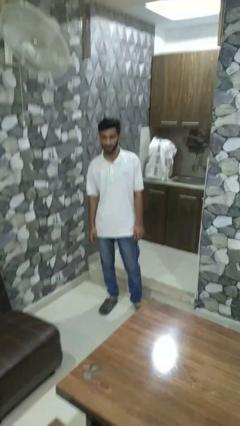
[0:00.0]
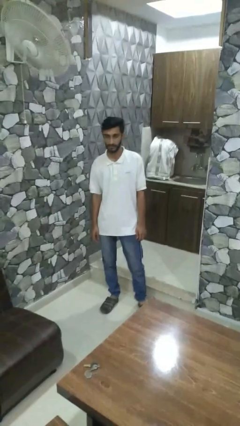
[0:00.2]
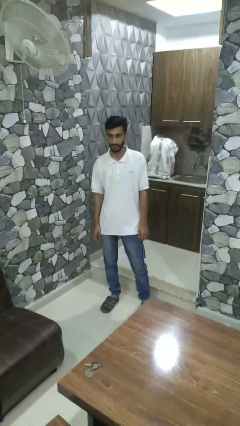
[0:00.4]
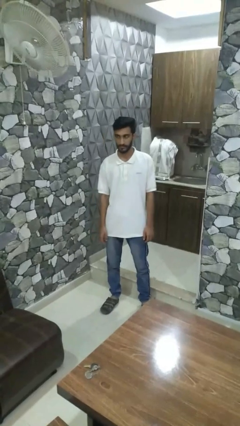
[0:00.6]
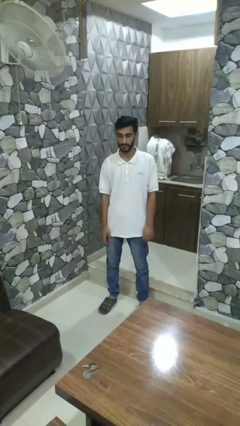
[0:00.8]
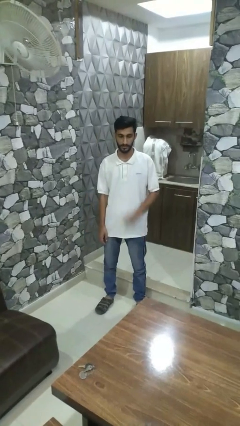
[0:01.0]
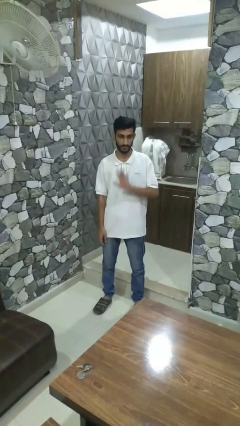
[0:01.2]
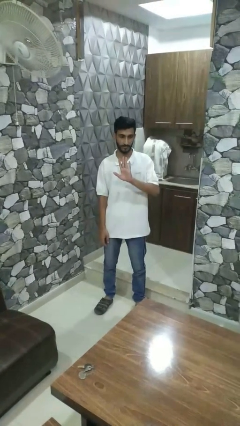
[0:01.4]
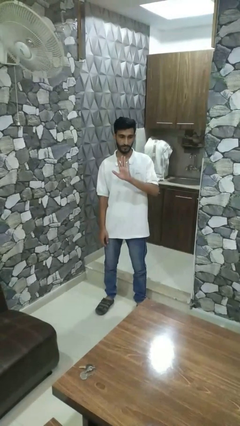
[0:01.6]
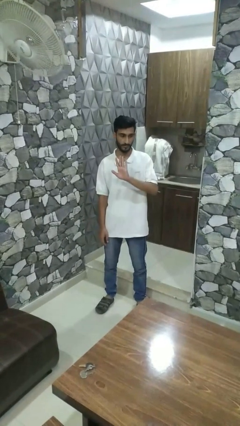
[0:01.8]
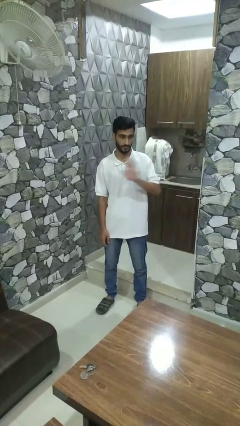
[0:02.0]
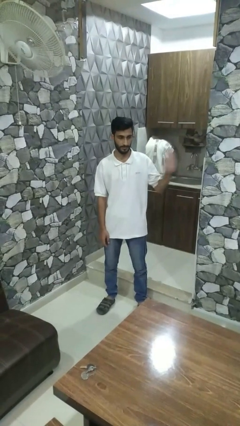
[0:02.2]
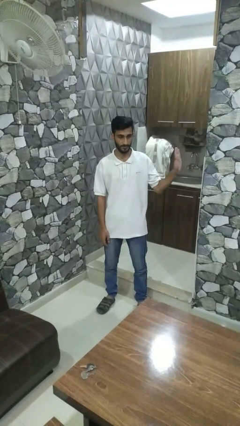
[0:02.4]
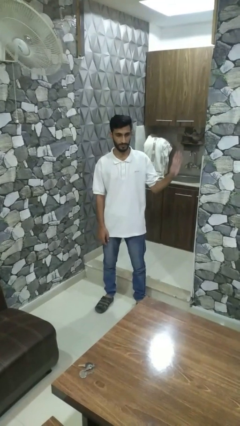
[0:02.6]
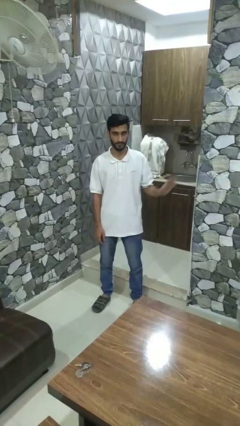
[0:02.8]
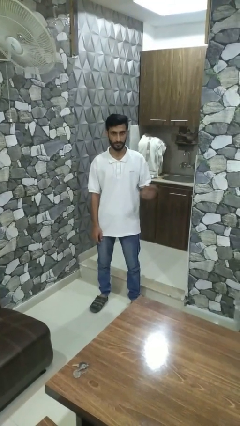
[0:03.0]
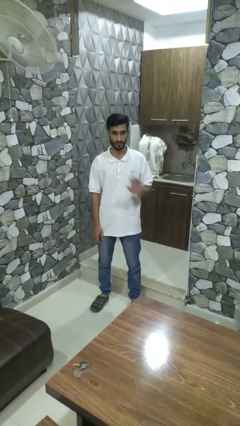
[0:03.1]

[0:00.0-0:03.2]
person gestures swipe left

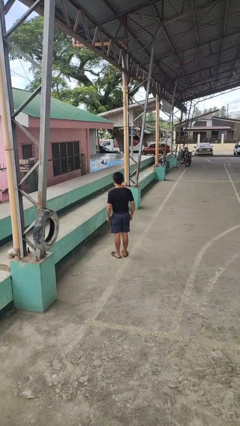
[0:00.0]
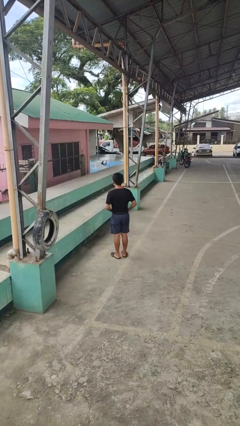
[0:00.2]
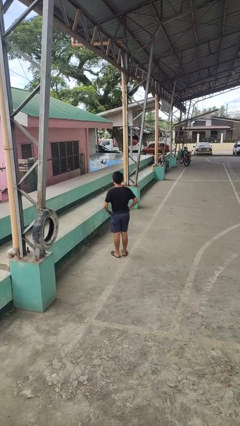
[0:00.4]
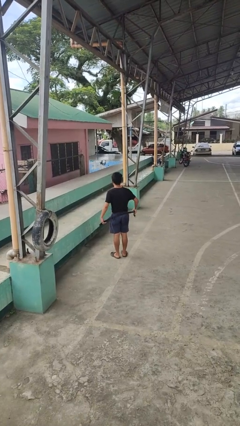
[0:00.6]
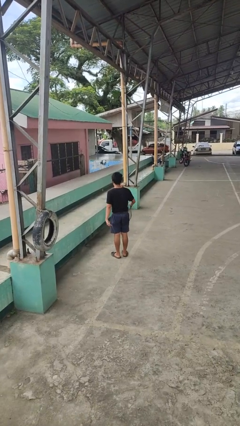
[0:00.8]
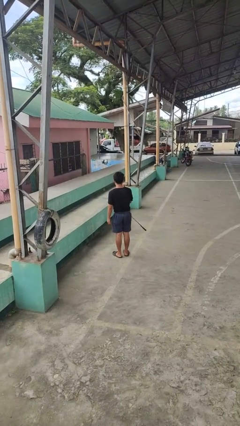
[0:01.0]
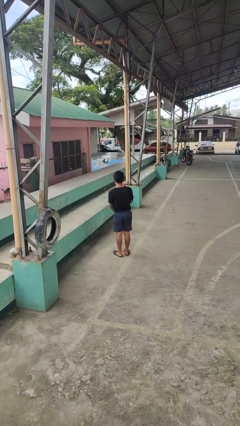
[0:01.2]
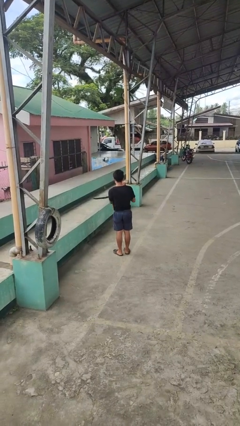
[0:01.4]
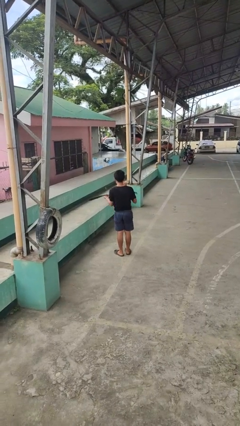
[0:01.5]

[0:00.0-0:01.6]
person takes off belt

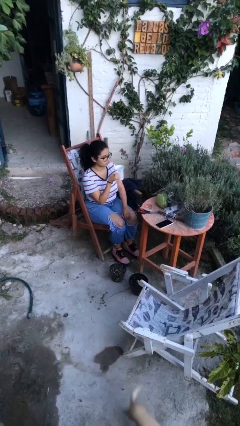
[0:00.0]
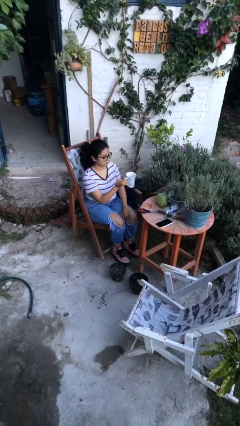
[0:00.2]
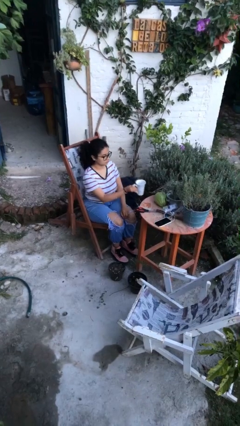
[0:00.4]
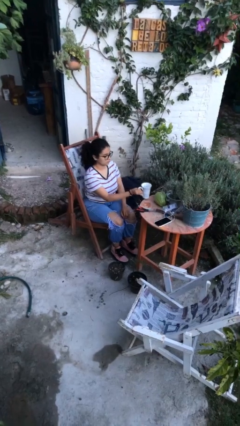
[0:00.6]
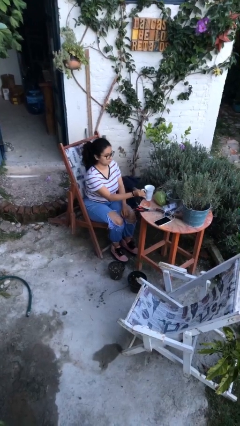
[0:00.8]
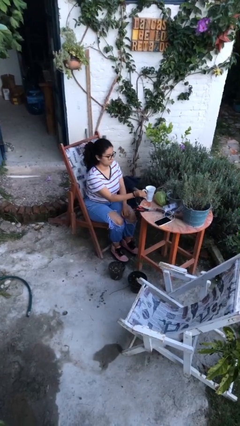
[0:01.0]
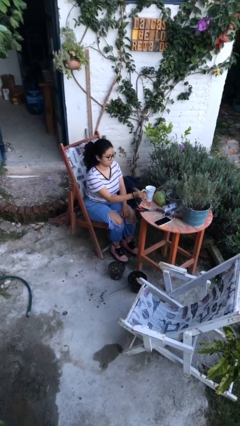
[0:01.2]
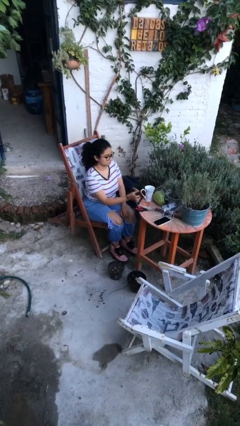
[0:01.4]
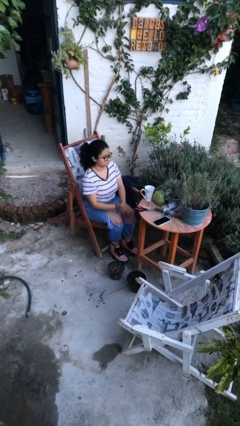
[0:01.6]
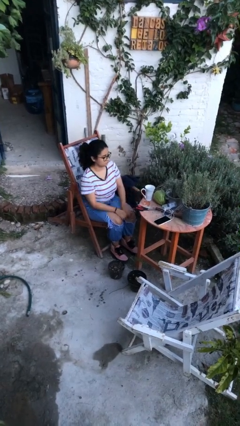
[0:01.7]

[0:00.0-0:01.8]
person puts down object on table

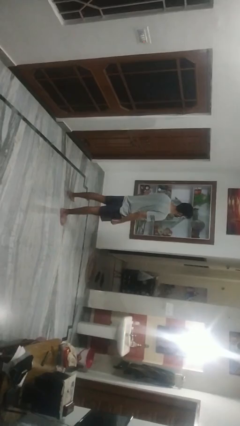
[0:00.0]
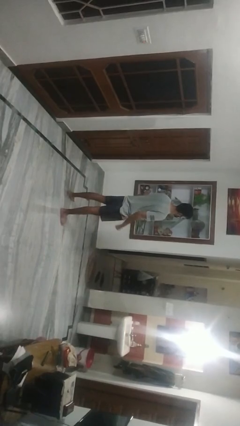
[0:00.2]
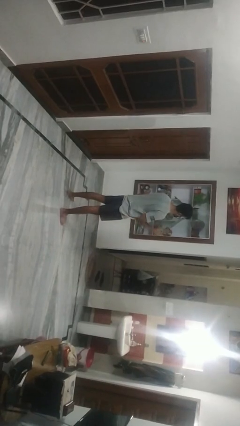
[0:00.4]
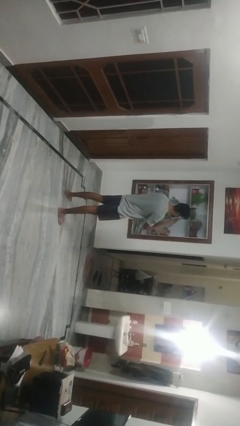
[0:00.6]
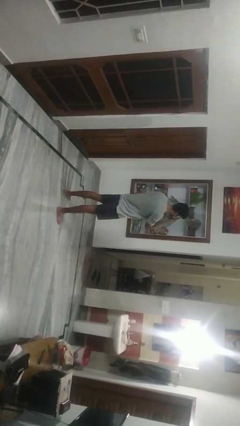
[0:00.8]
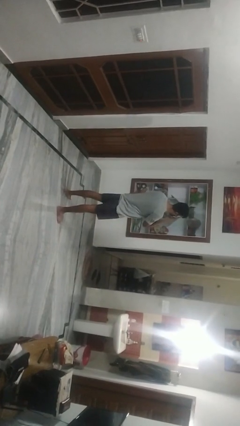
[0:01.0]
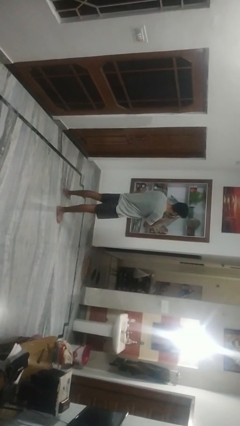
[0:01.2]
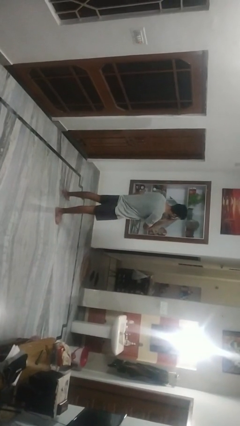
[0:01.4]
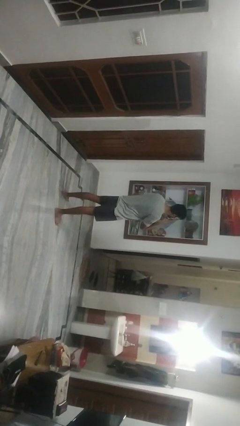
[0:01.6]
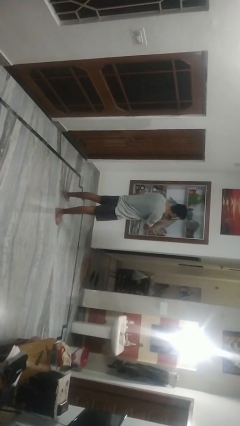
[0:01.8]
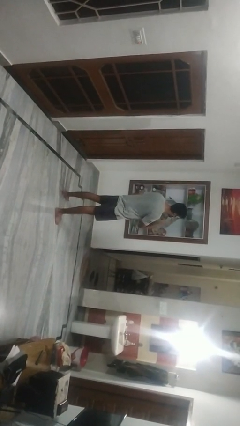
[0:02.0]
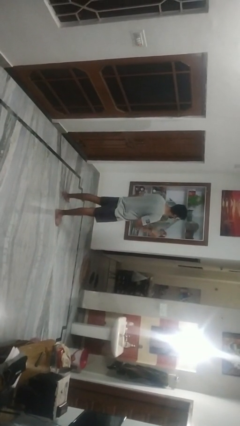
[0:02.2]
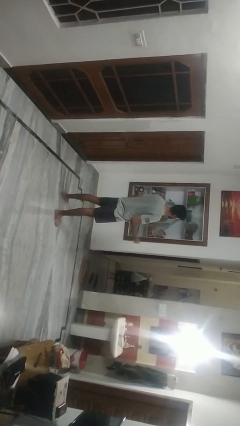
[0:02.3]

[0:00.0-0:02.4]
person scratches face

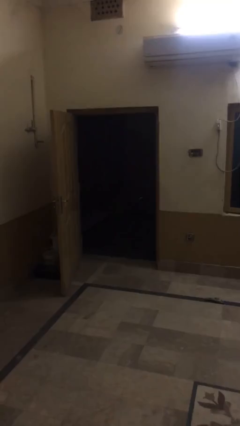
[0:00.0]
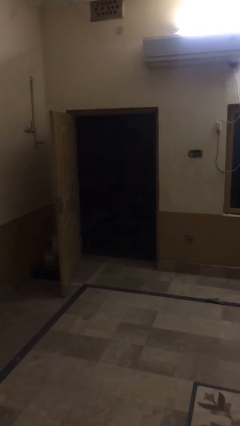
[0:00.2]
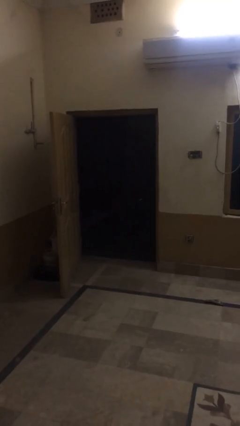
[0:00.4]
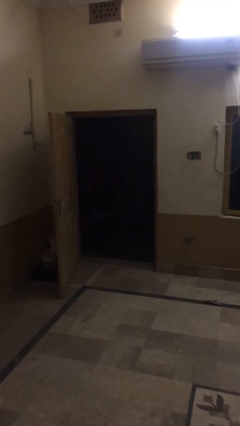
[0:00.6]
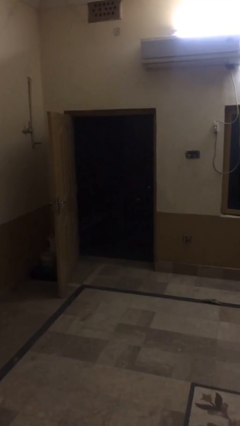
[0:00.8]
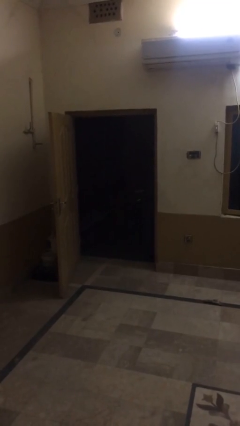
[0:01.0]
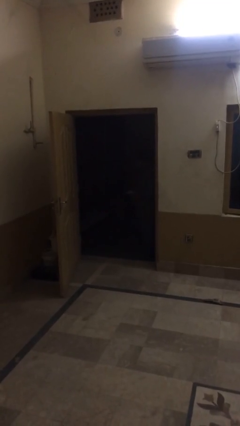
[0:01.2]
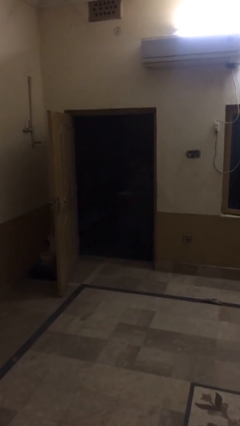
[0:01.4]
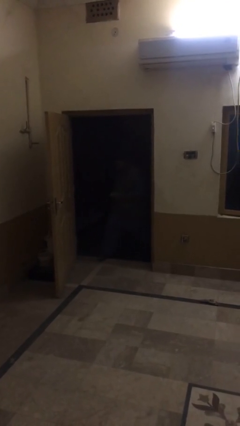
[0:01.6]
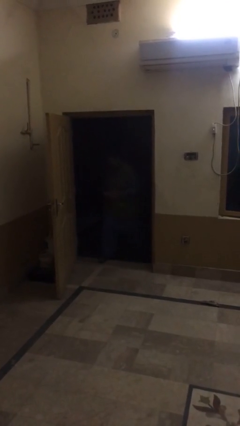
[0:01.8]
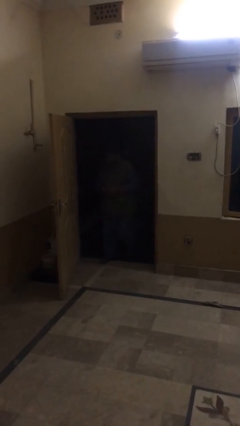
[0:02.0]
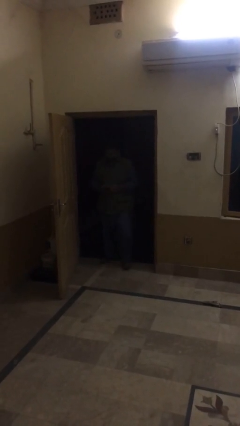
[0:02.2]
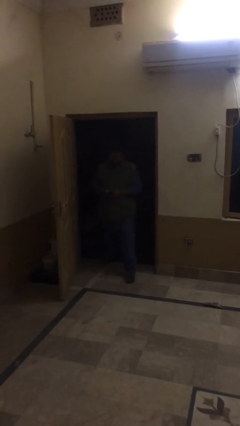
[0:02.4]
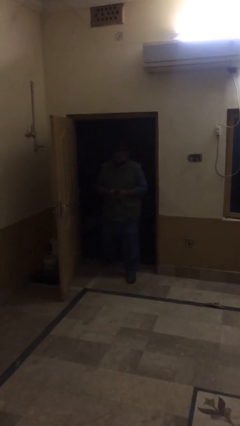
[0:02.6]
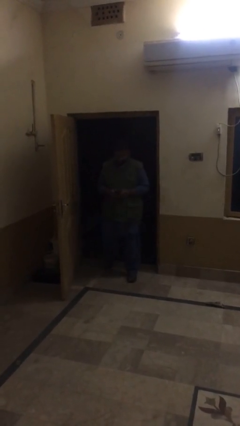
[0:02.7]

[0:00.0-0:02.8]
person enters scene through structure

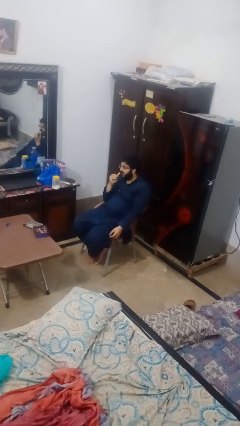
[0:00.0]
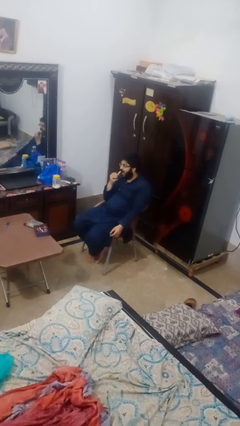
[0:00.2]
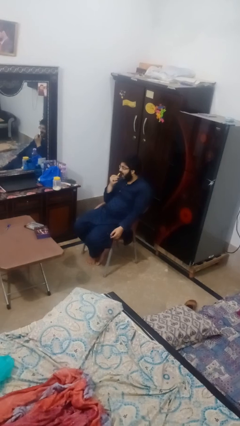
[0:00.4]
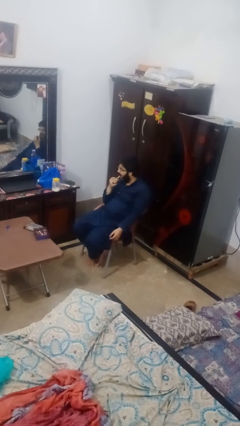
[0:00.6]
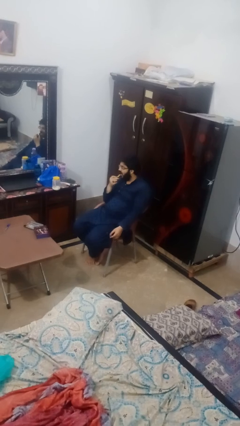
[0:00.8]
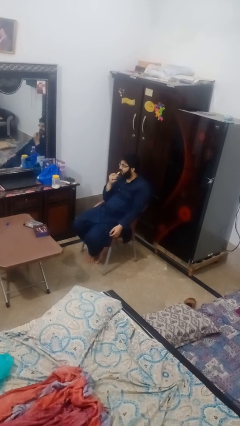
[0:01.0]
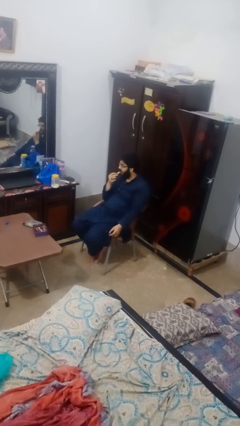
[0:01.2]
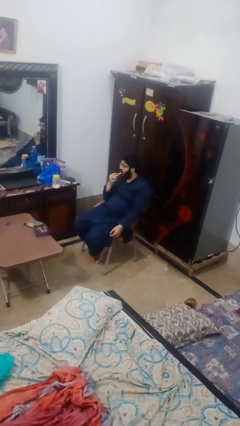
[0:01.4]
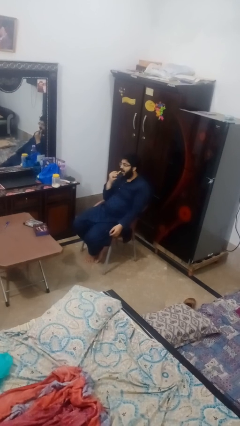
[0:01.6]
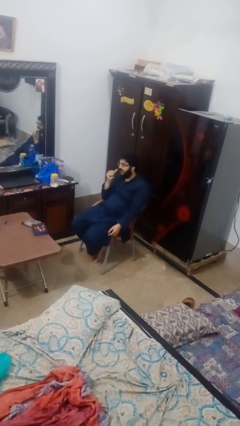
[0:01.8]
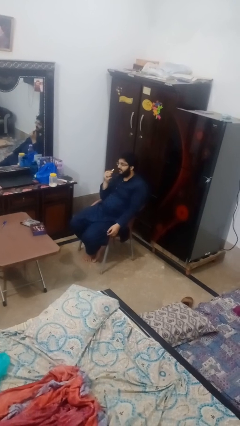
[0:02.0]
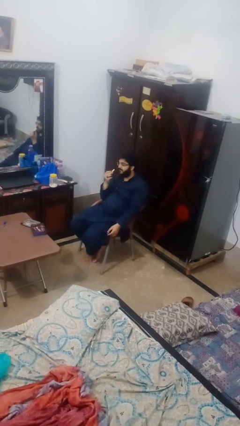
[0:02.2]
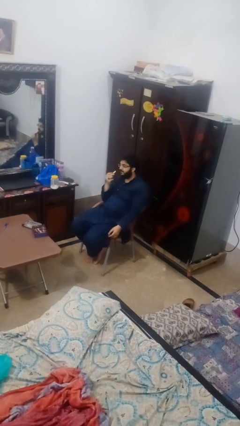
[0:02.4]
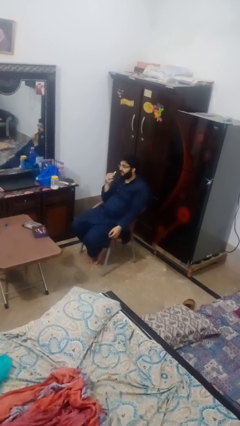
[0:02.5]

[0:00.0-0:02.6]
person applies lip makeup

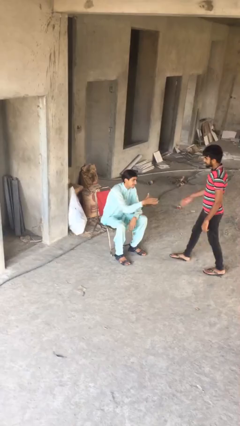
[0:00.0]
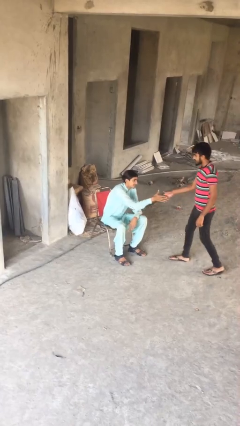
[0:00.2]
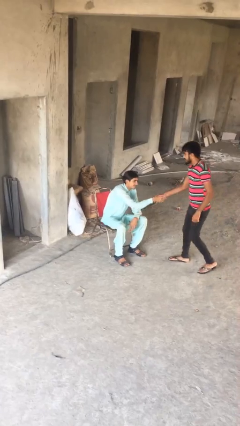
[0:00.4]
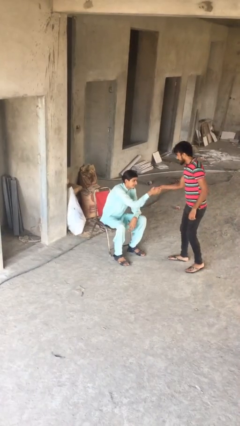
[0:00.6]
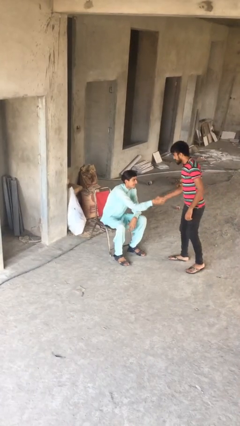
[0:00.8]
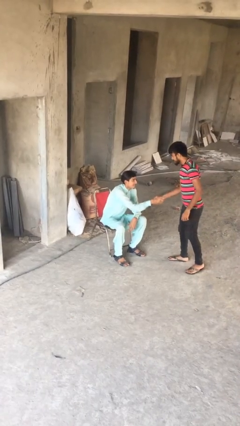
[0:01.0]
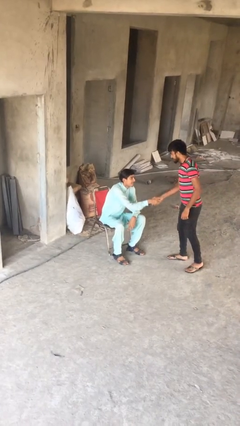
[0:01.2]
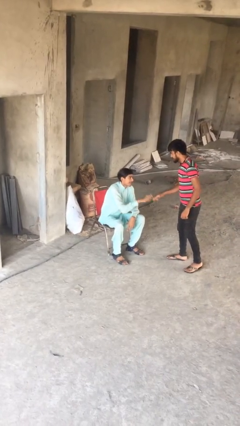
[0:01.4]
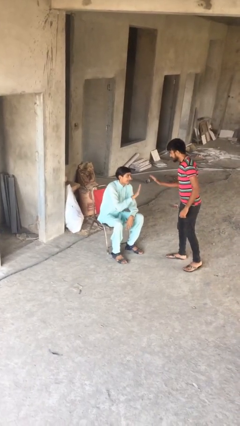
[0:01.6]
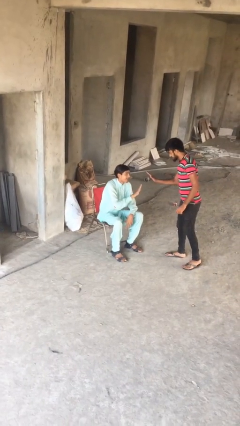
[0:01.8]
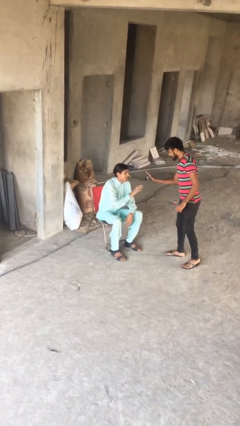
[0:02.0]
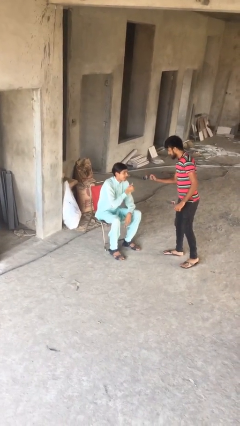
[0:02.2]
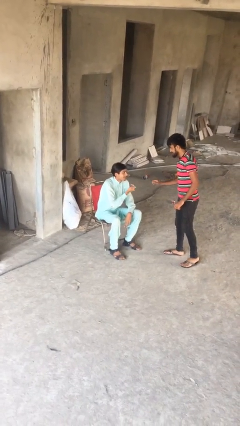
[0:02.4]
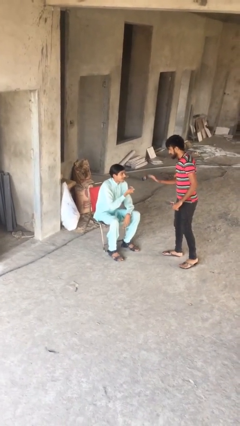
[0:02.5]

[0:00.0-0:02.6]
person shakes hand
